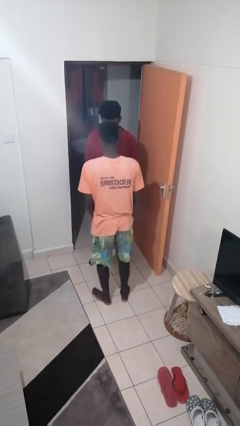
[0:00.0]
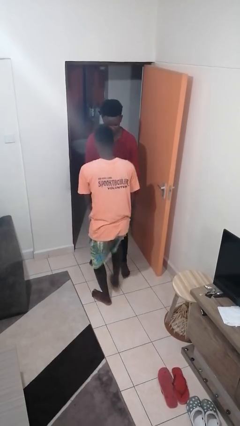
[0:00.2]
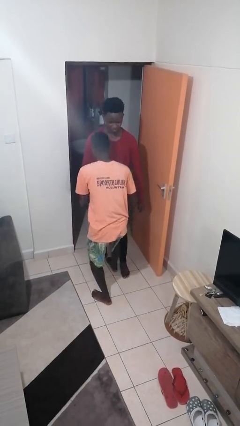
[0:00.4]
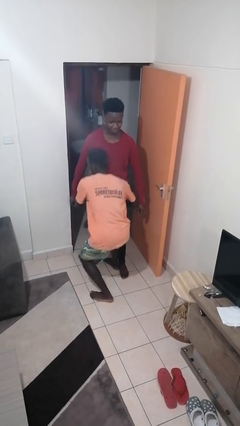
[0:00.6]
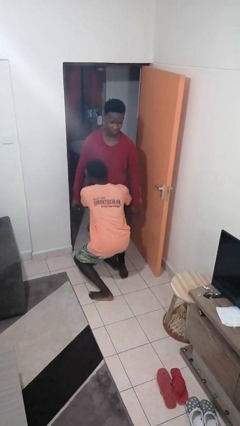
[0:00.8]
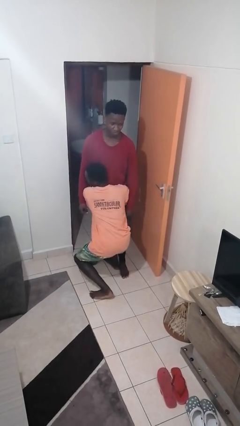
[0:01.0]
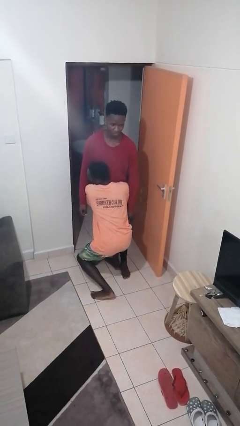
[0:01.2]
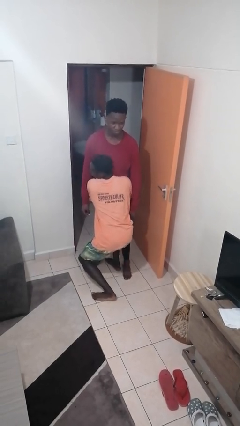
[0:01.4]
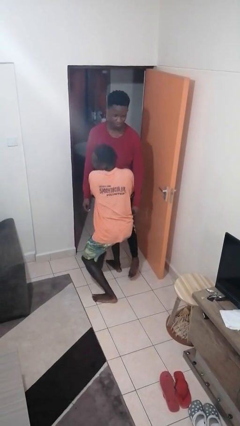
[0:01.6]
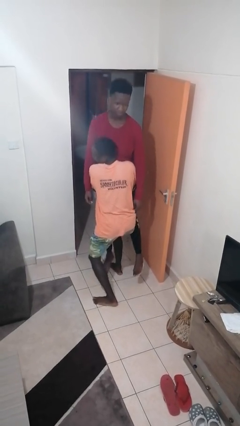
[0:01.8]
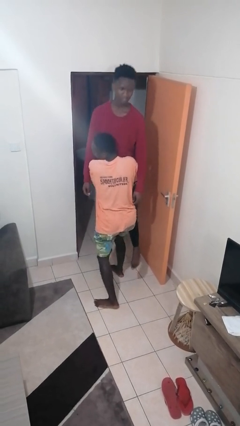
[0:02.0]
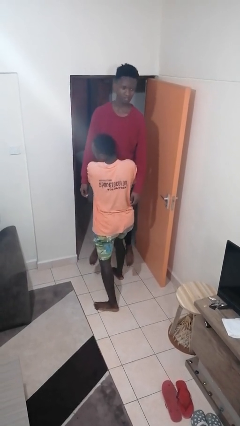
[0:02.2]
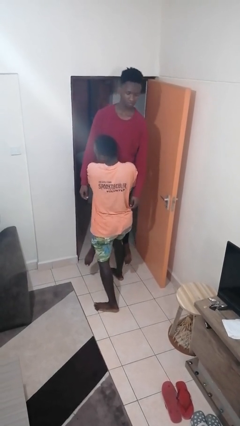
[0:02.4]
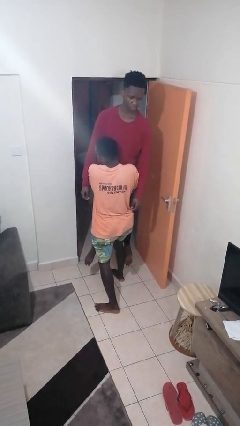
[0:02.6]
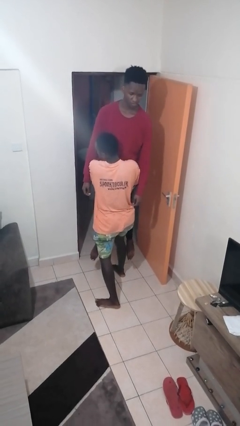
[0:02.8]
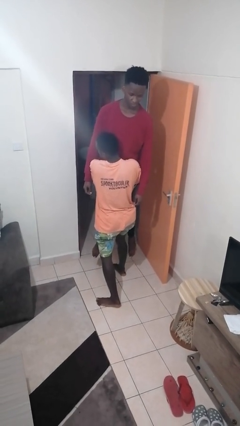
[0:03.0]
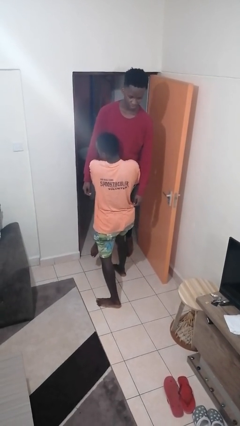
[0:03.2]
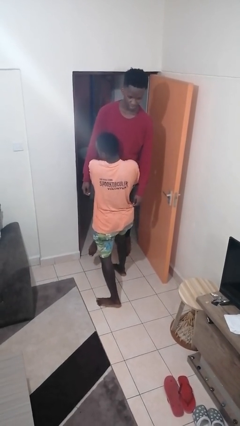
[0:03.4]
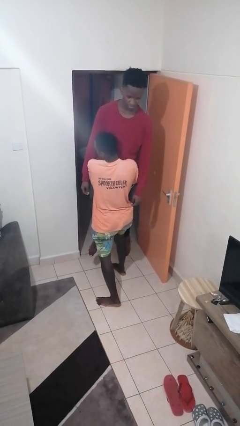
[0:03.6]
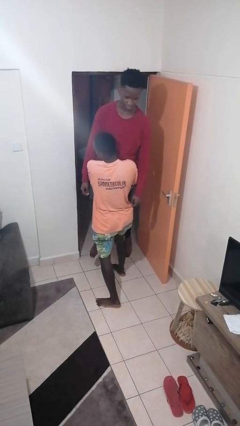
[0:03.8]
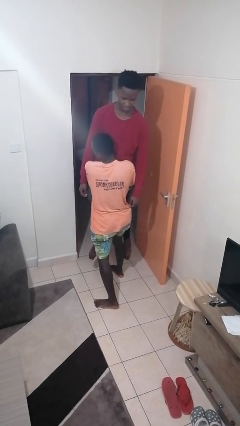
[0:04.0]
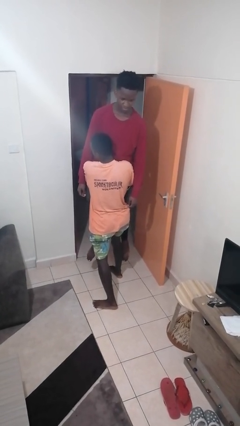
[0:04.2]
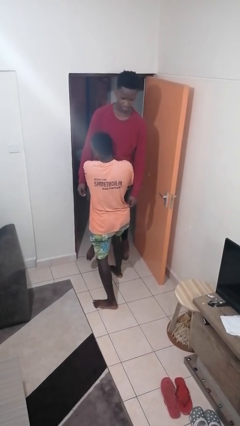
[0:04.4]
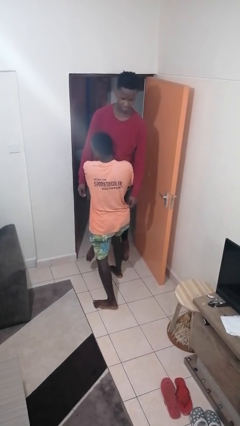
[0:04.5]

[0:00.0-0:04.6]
person picks up person

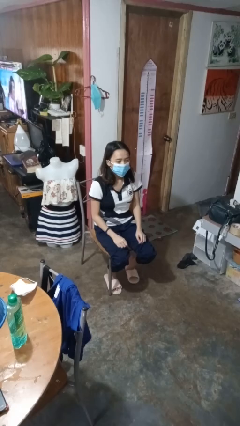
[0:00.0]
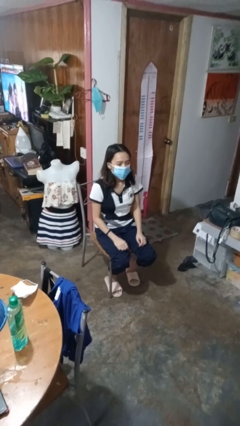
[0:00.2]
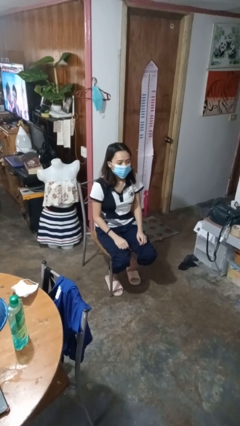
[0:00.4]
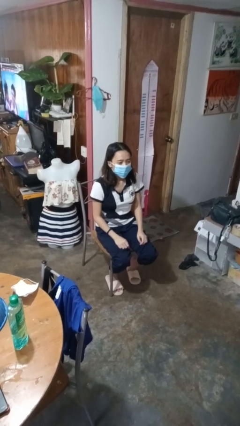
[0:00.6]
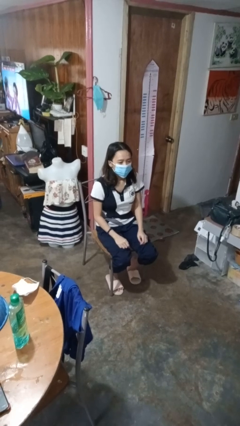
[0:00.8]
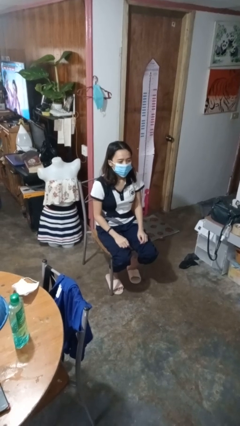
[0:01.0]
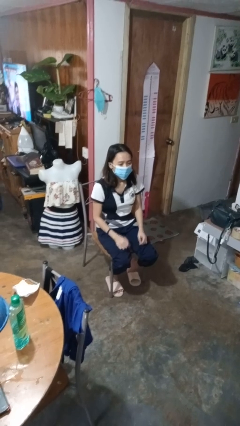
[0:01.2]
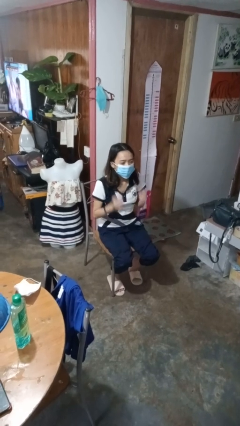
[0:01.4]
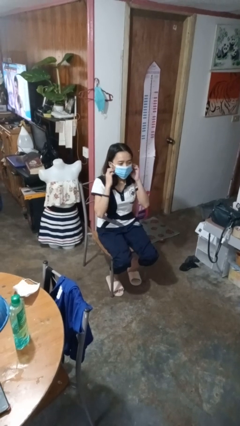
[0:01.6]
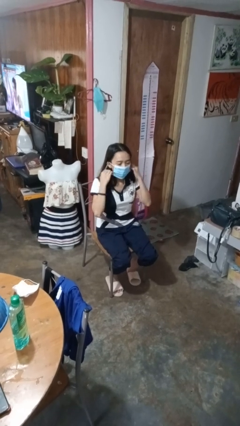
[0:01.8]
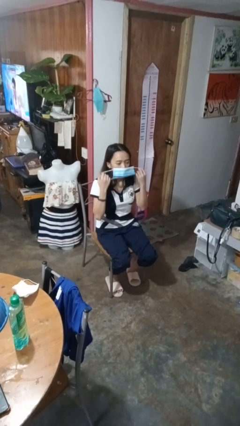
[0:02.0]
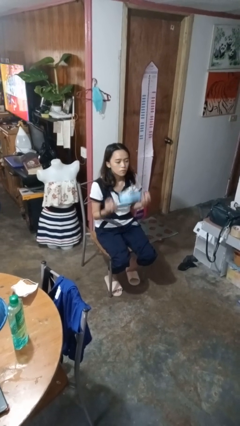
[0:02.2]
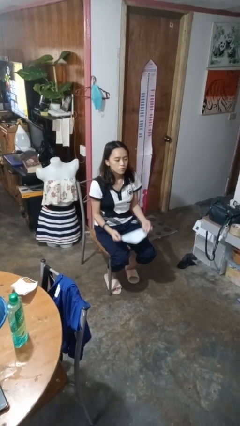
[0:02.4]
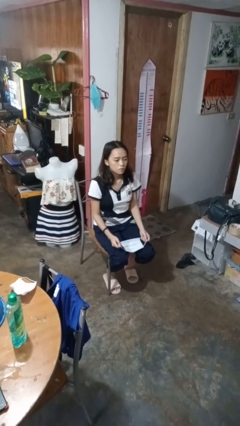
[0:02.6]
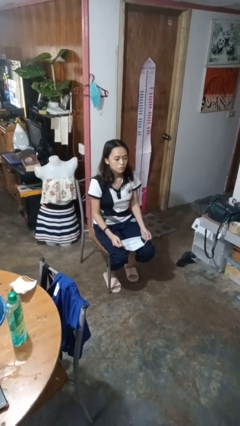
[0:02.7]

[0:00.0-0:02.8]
person takes off facemask

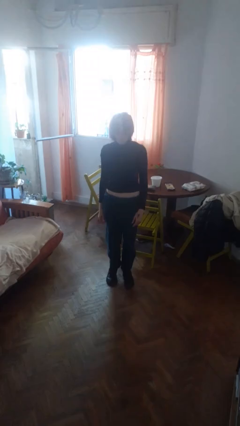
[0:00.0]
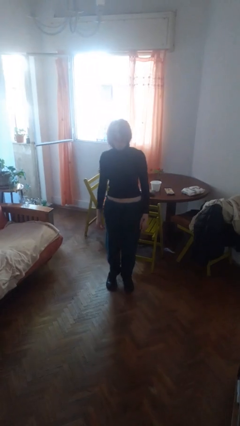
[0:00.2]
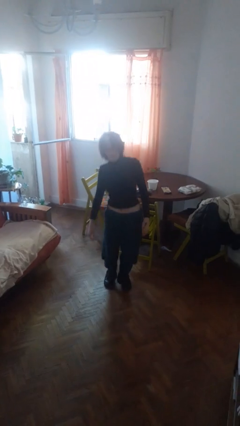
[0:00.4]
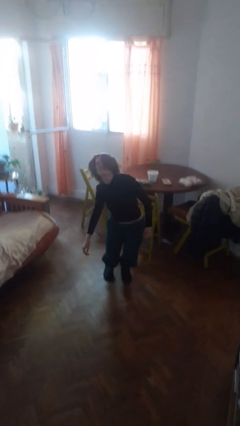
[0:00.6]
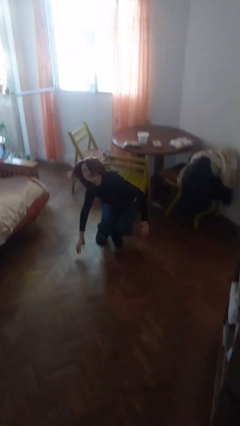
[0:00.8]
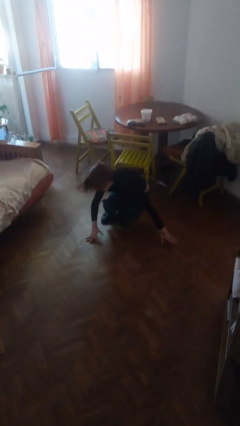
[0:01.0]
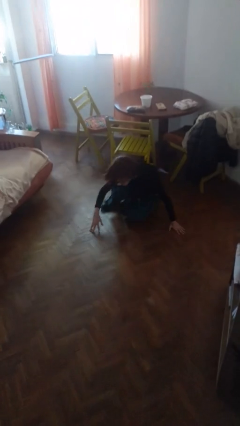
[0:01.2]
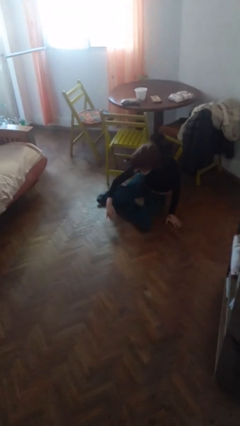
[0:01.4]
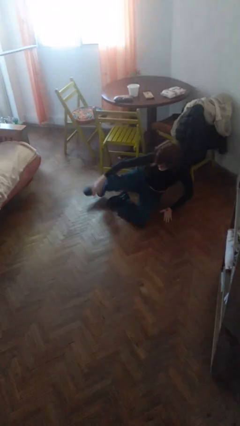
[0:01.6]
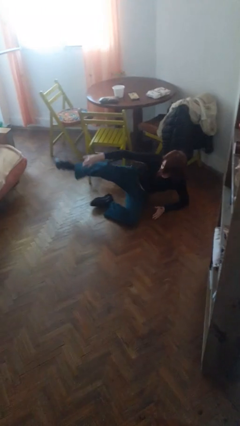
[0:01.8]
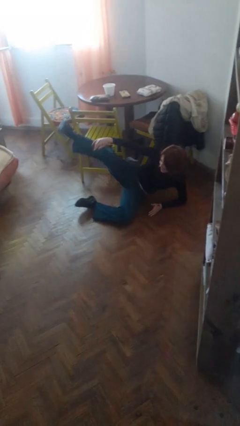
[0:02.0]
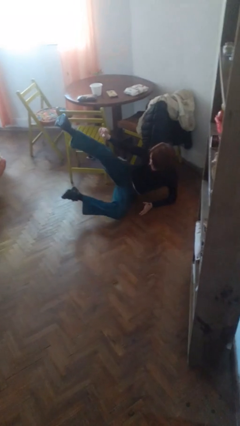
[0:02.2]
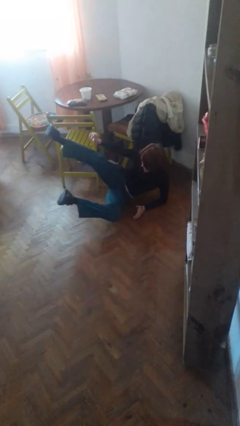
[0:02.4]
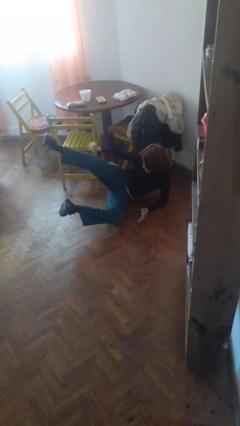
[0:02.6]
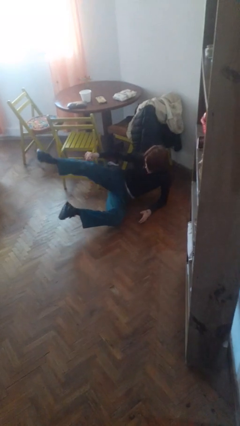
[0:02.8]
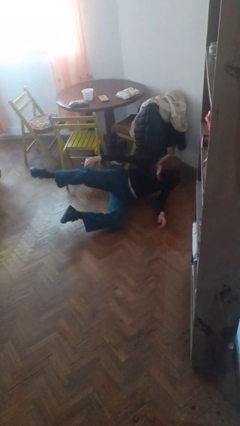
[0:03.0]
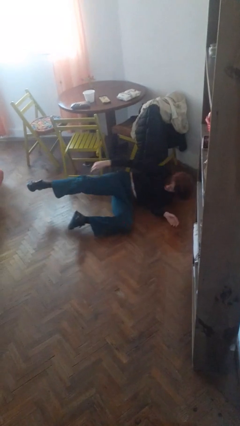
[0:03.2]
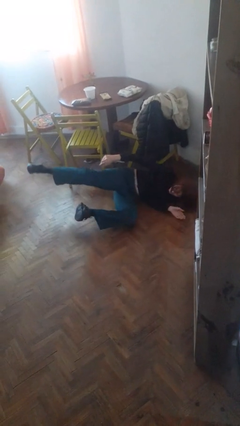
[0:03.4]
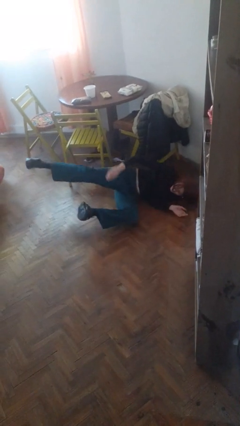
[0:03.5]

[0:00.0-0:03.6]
person falls while standing

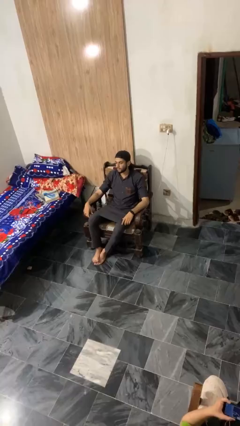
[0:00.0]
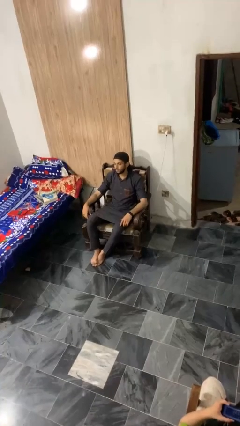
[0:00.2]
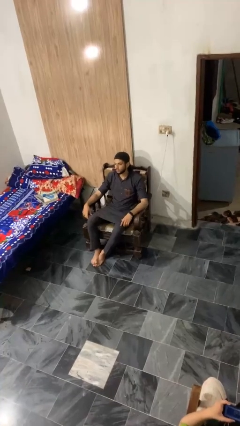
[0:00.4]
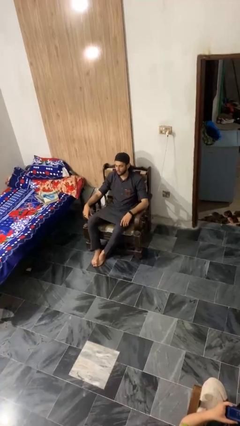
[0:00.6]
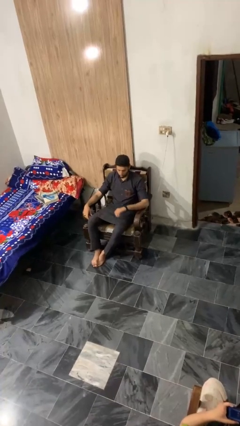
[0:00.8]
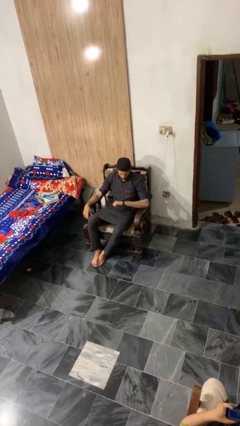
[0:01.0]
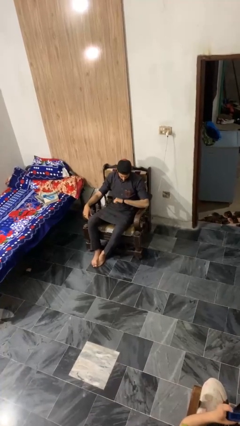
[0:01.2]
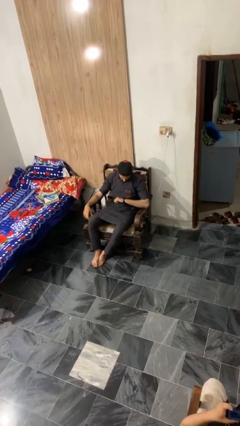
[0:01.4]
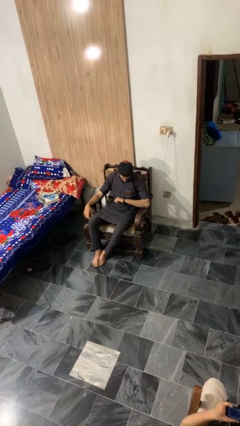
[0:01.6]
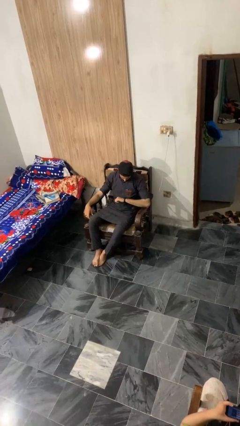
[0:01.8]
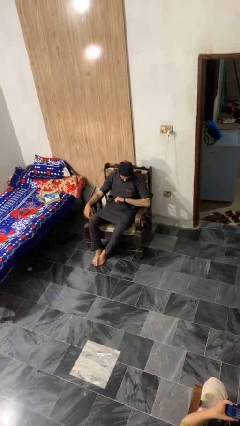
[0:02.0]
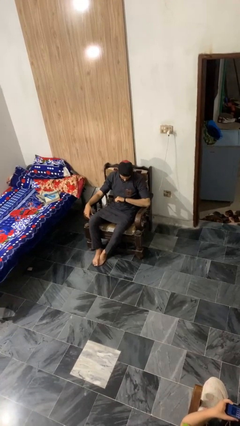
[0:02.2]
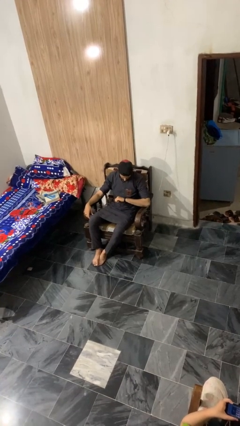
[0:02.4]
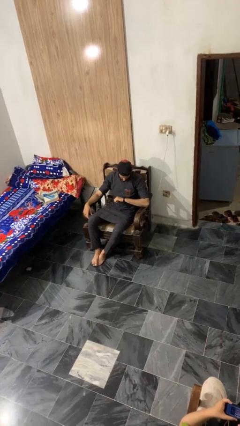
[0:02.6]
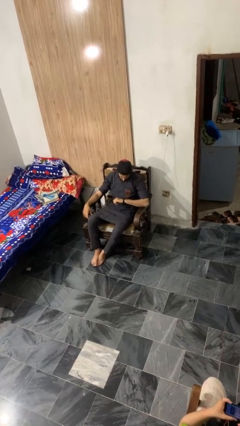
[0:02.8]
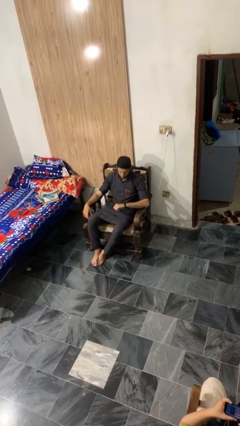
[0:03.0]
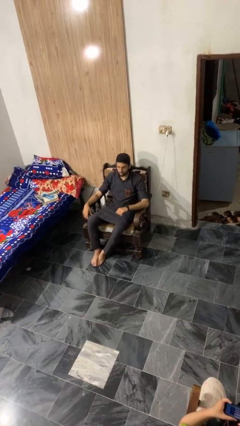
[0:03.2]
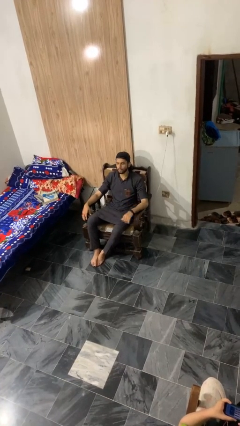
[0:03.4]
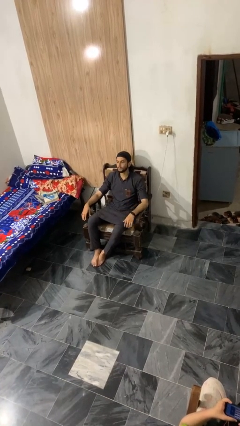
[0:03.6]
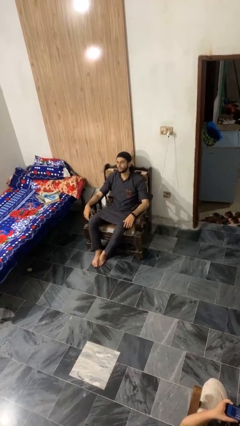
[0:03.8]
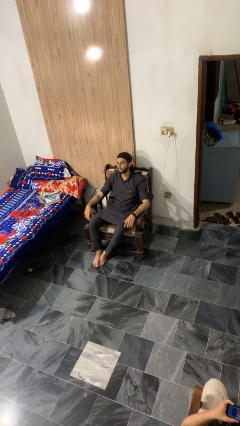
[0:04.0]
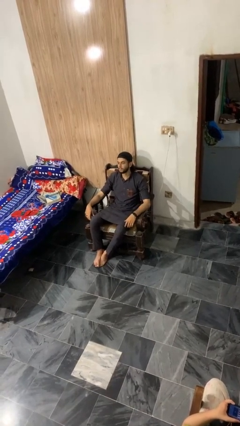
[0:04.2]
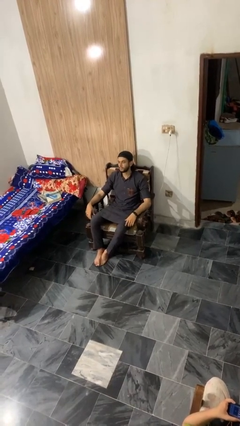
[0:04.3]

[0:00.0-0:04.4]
person looks at wristwatch

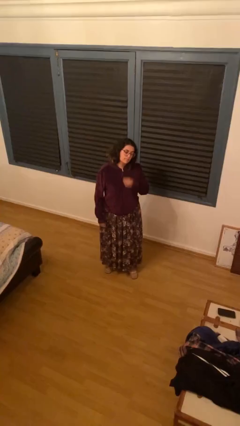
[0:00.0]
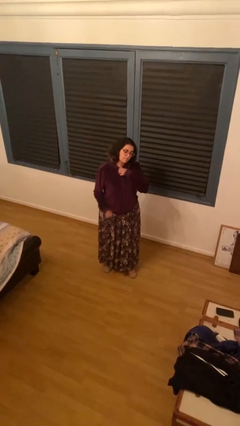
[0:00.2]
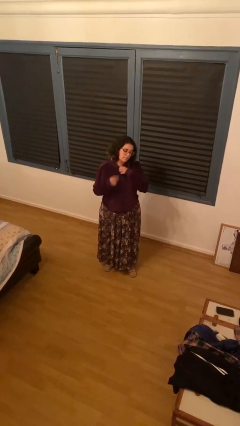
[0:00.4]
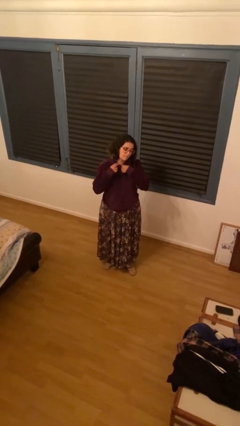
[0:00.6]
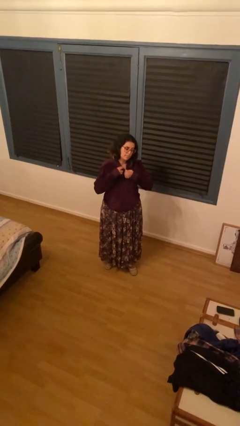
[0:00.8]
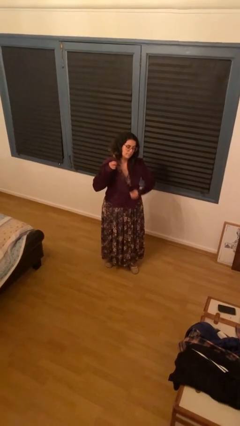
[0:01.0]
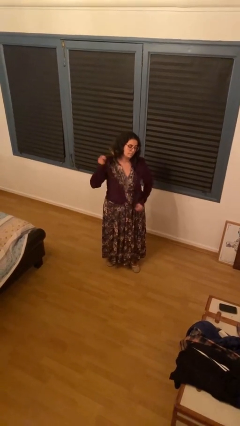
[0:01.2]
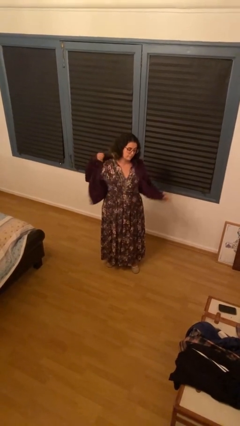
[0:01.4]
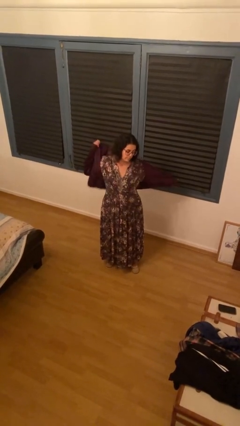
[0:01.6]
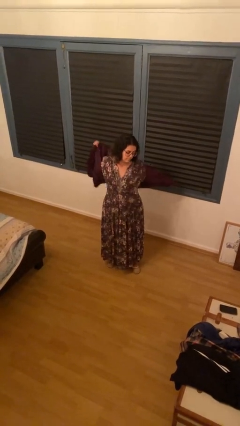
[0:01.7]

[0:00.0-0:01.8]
person unzips jacket

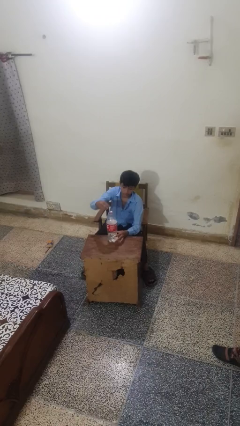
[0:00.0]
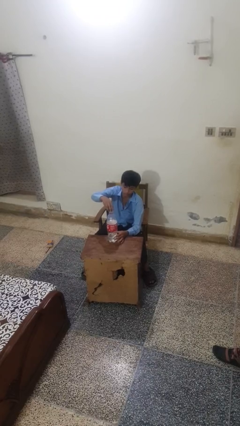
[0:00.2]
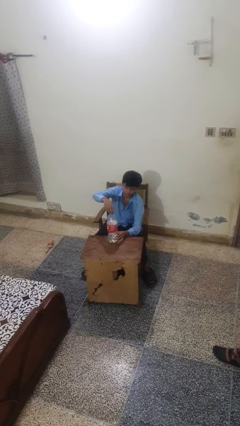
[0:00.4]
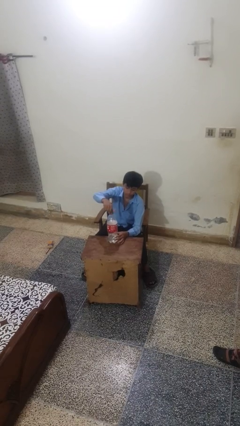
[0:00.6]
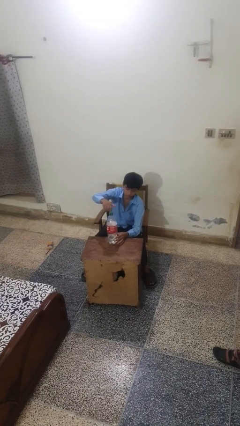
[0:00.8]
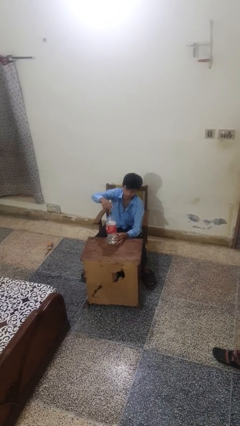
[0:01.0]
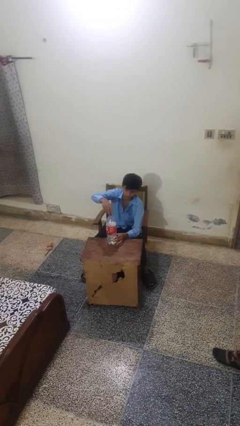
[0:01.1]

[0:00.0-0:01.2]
person screws lid to bottle
